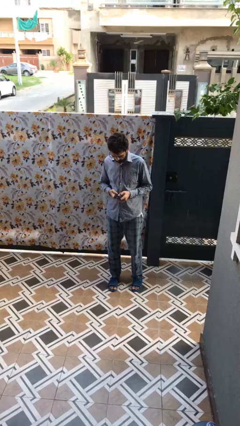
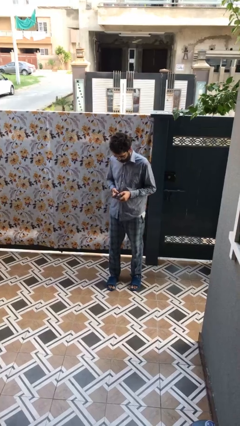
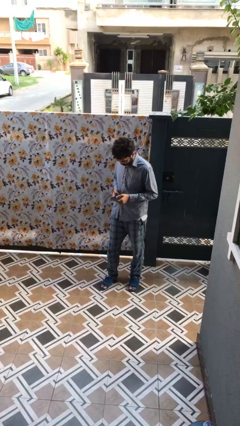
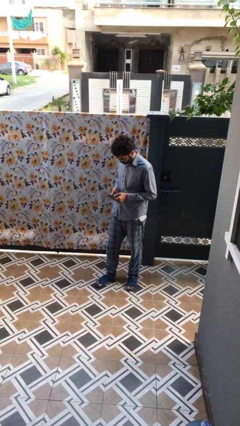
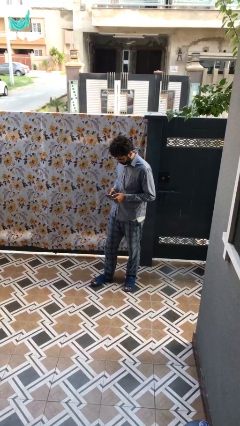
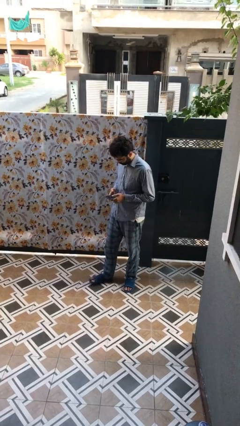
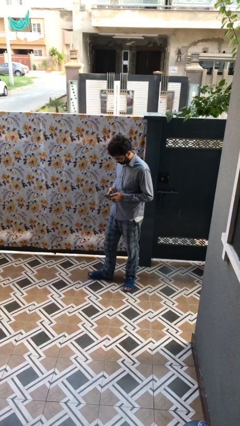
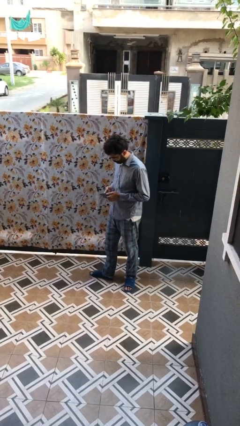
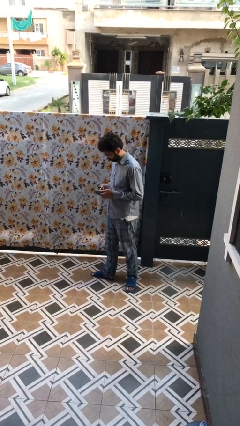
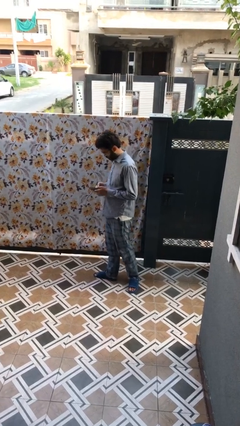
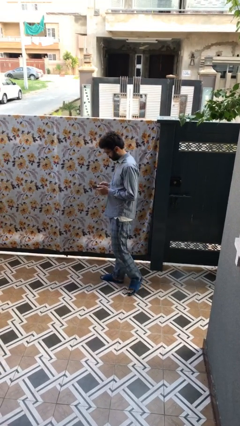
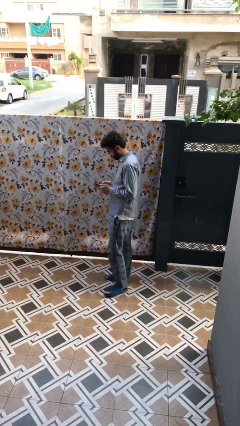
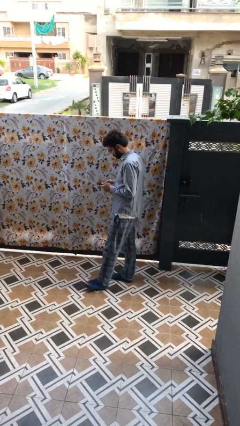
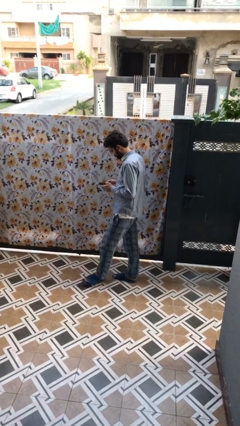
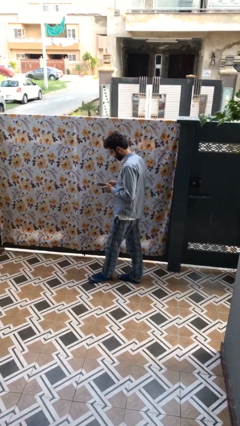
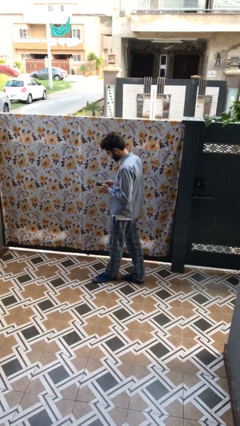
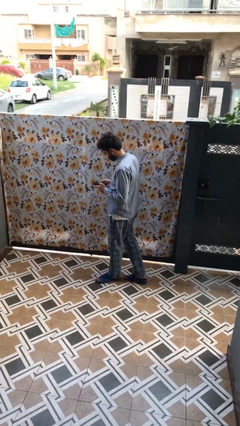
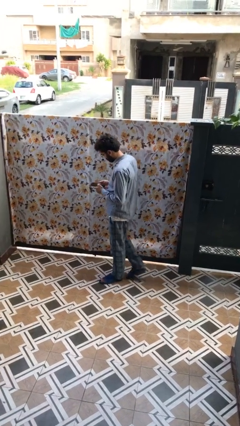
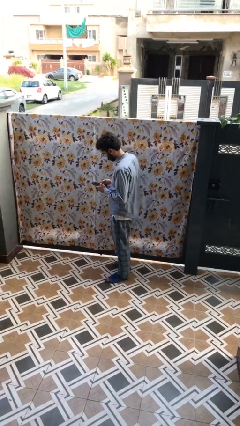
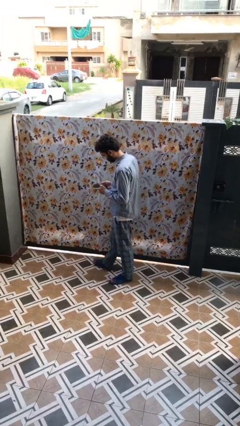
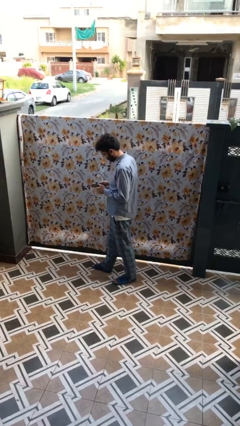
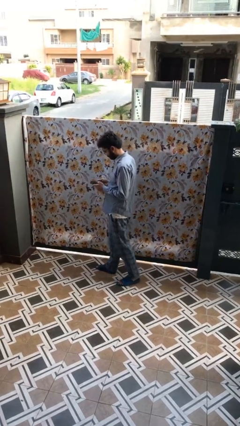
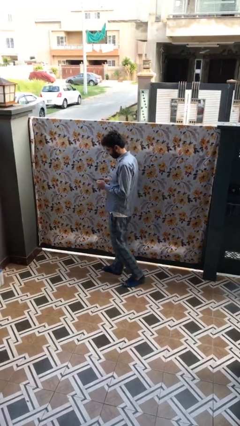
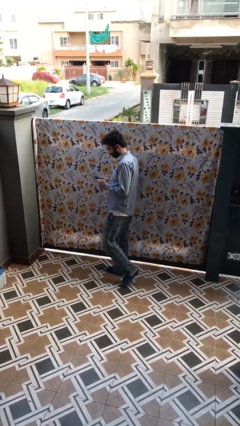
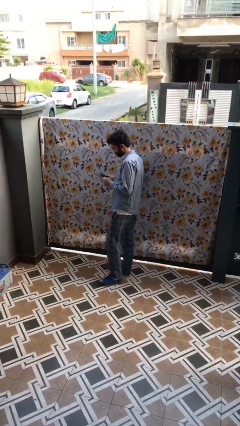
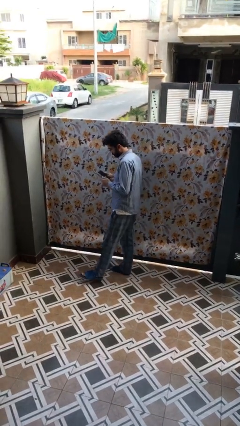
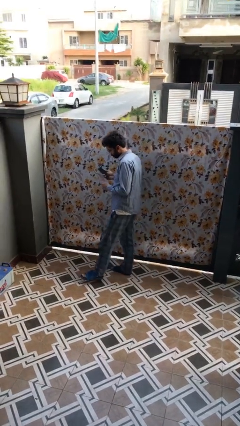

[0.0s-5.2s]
person texts on phone

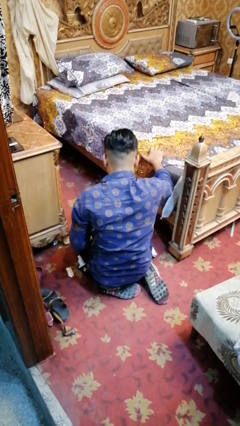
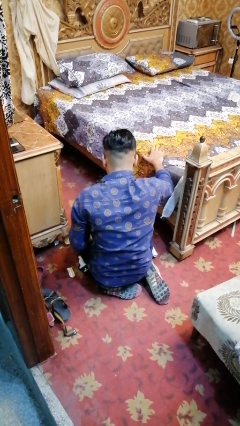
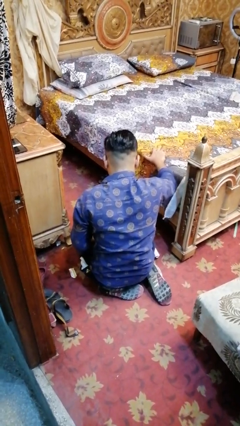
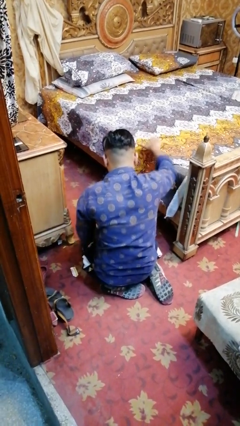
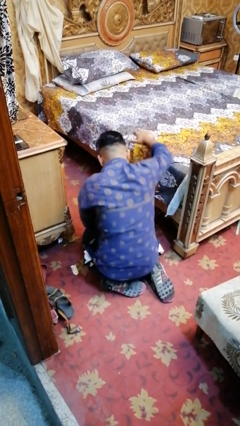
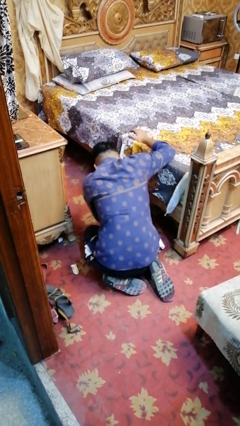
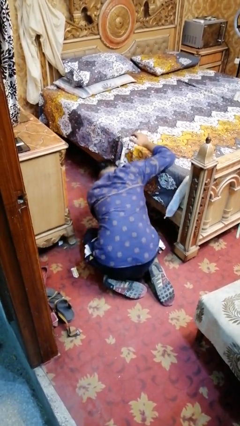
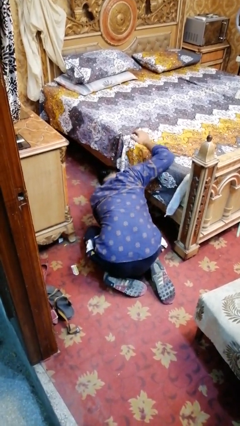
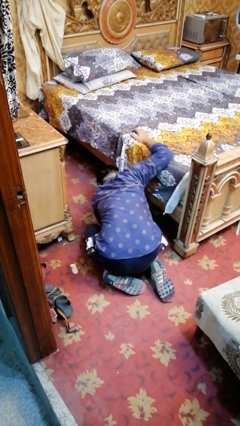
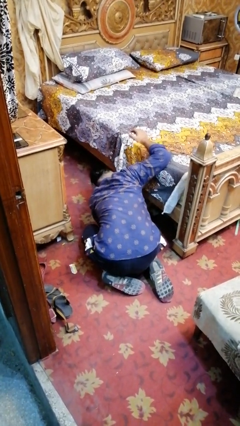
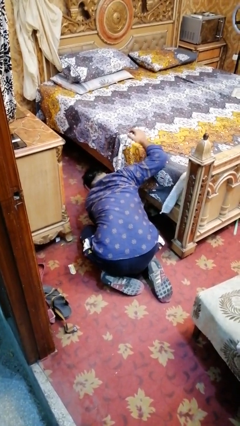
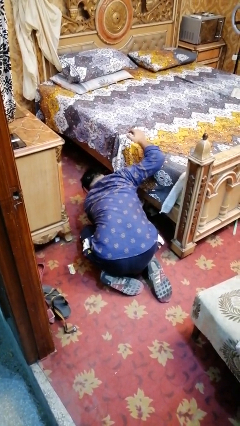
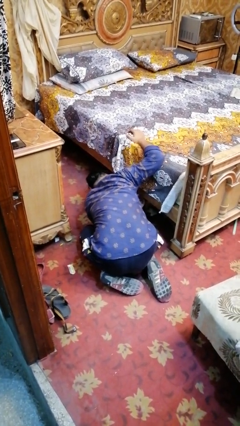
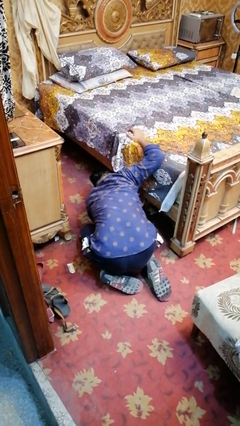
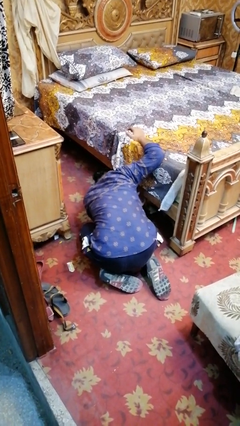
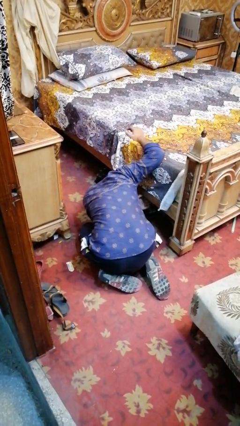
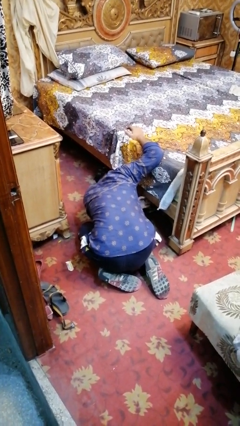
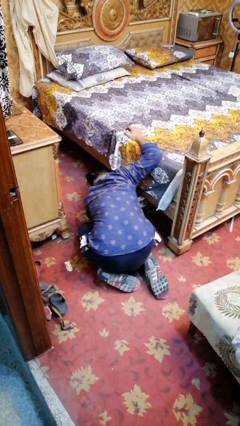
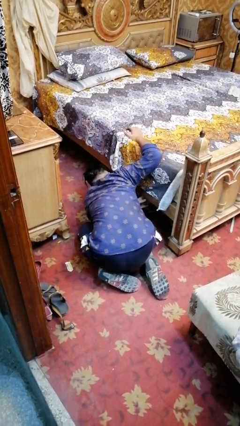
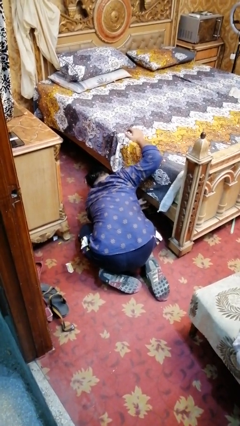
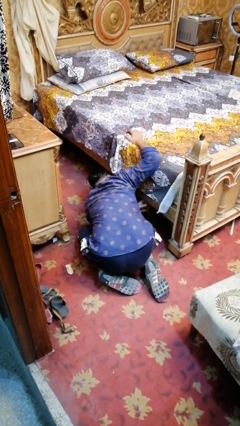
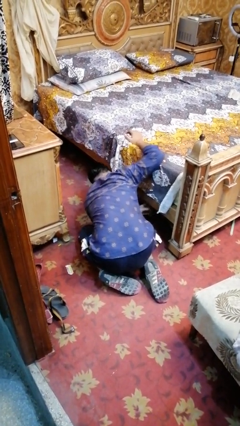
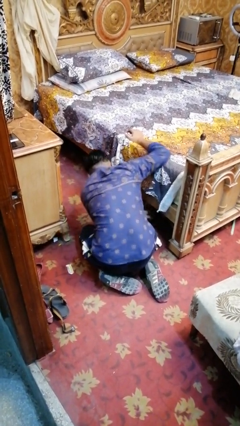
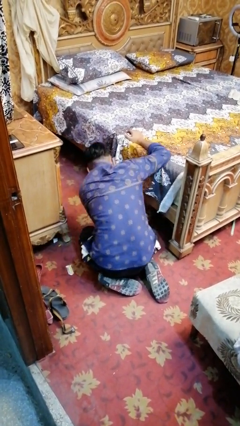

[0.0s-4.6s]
person searches under bed

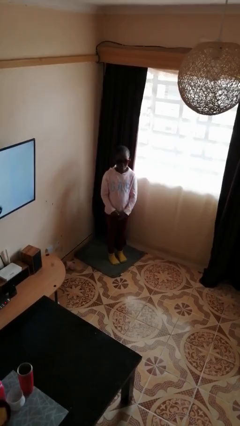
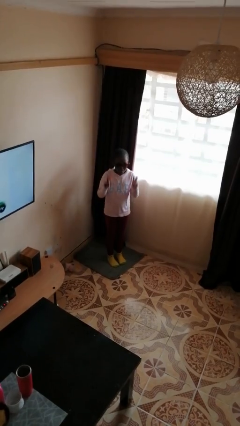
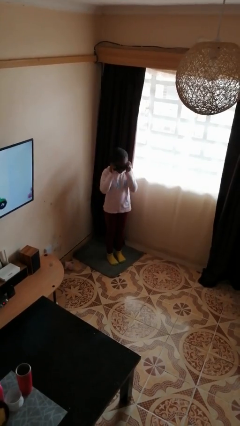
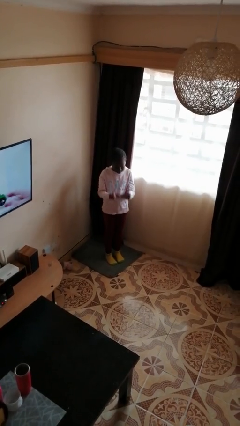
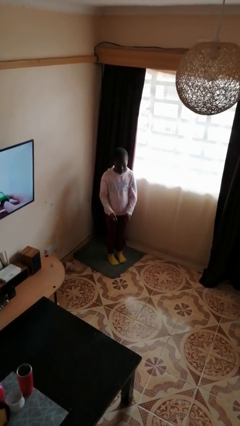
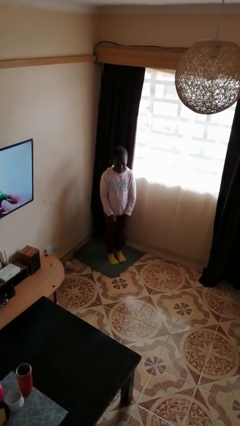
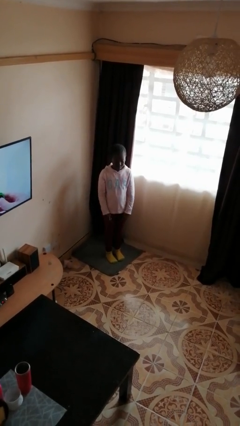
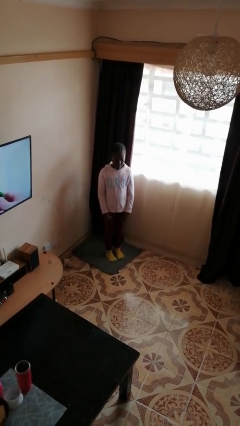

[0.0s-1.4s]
person takes off sunglasses

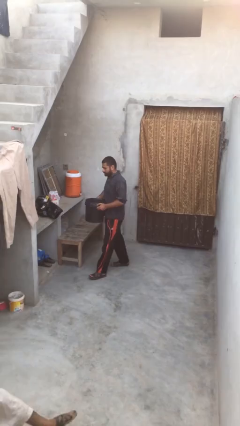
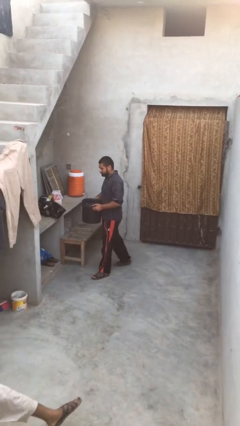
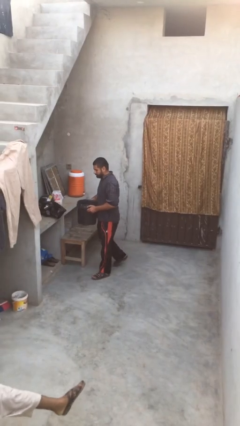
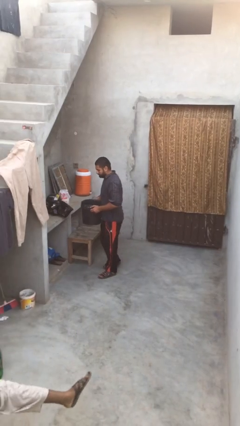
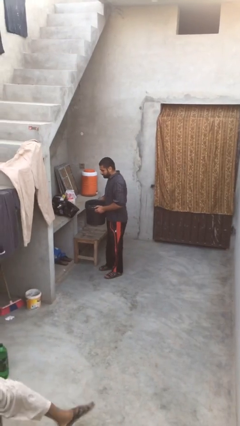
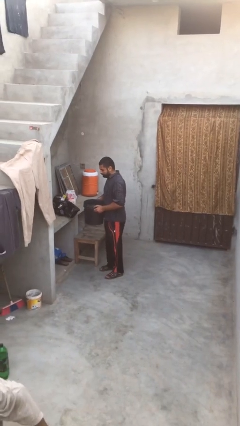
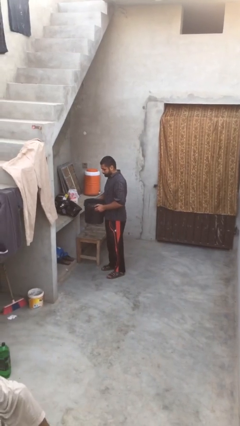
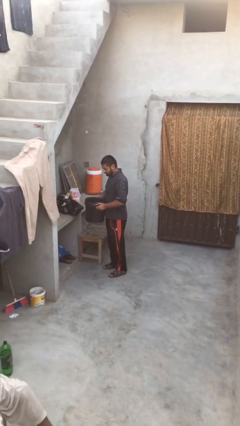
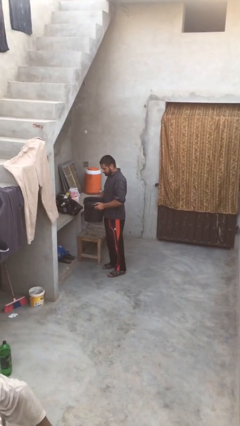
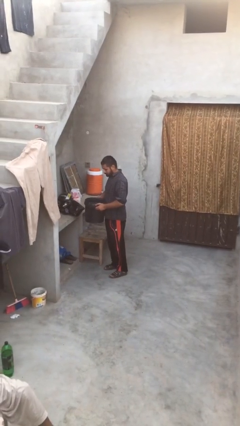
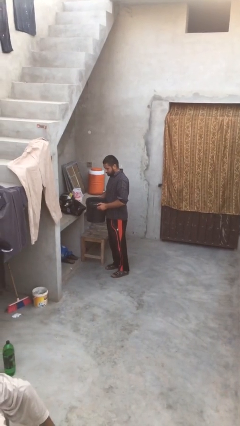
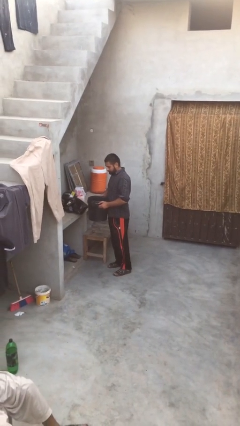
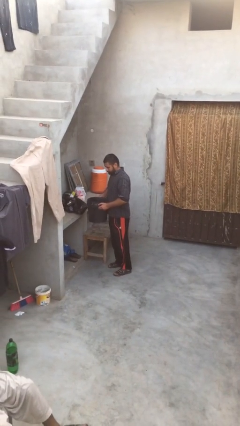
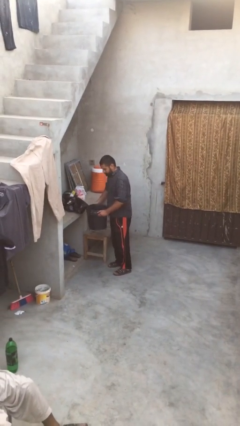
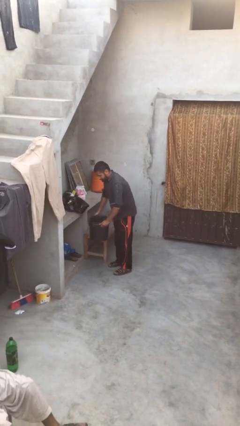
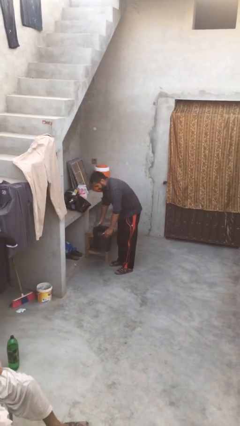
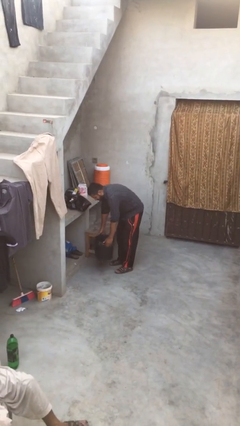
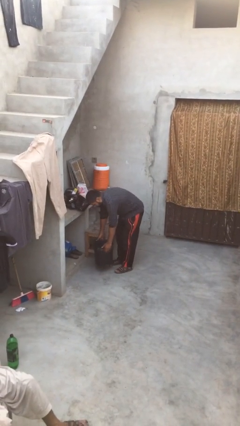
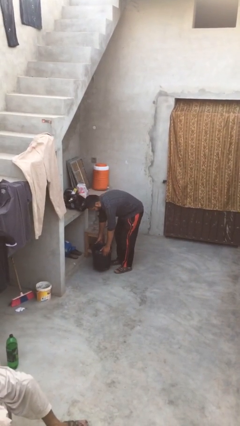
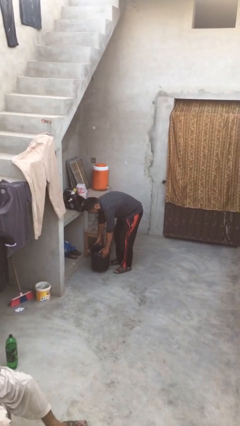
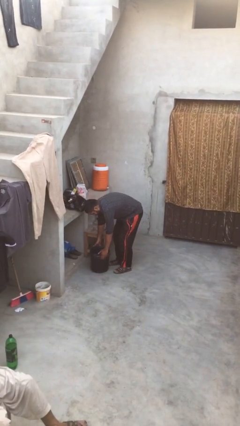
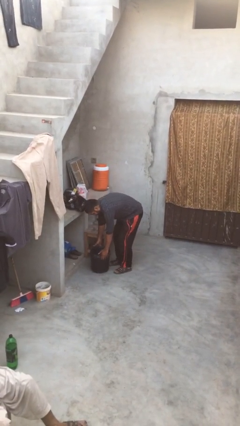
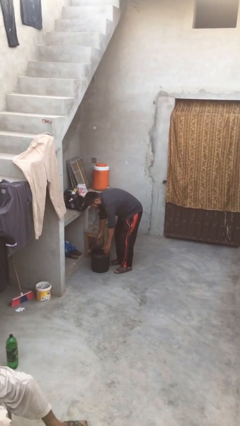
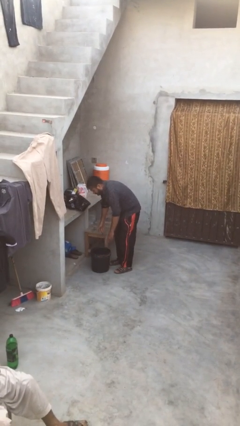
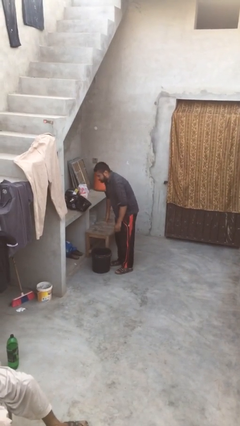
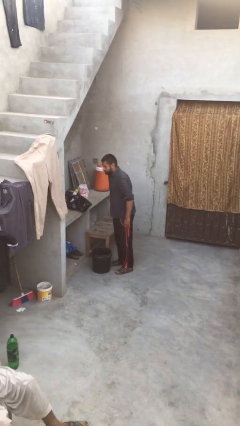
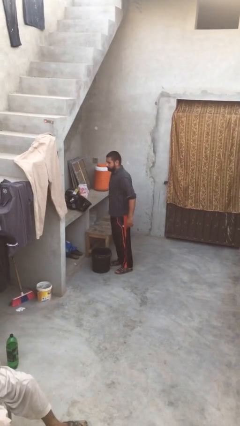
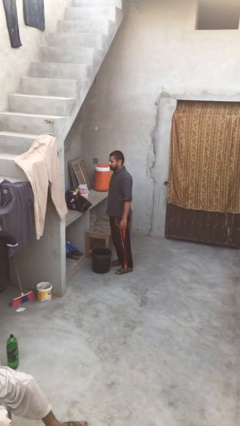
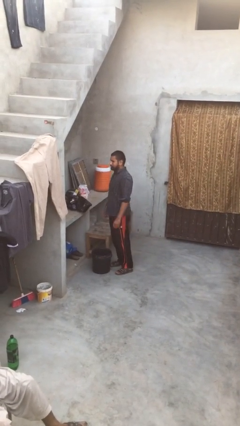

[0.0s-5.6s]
person puts down object on floor

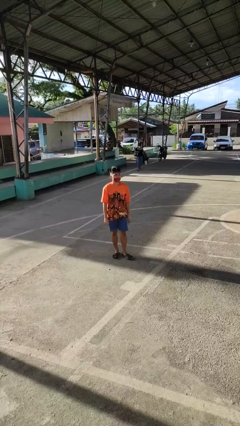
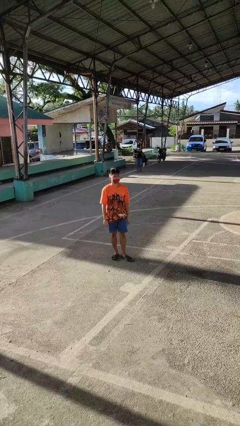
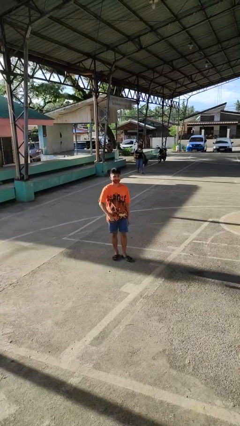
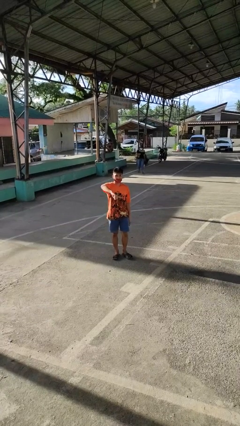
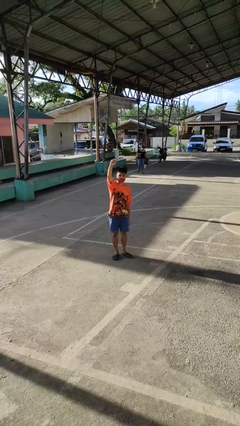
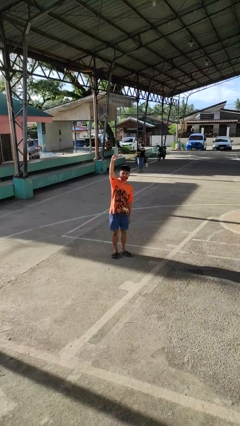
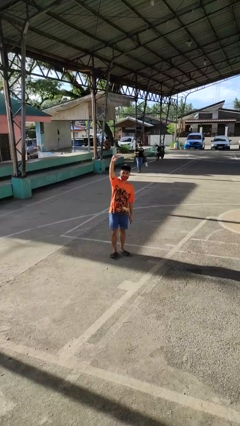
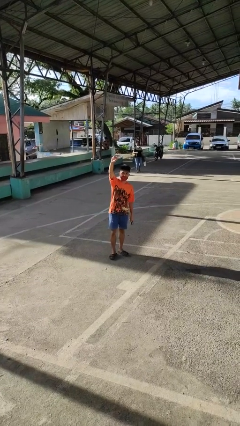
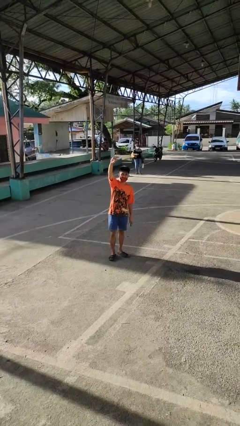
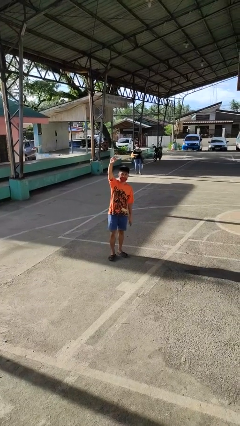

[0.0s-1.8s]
person gestures swipe up
